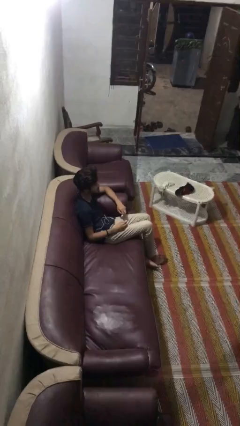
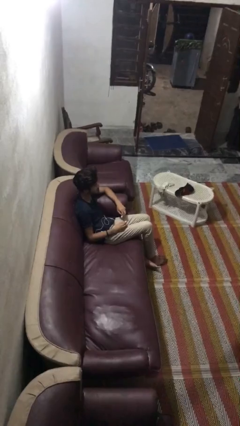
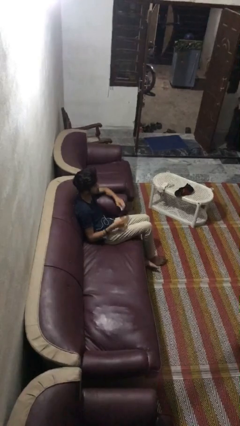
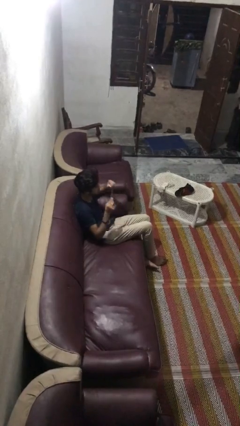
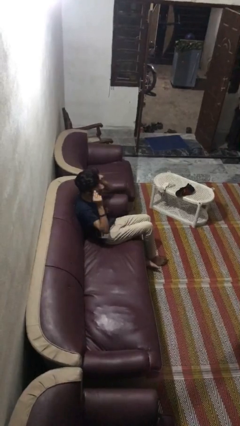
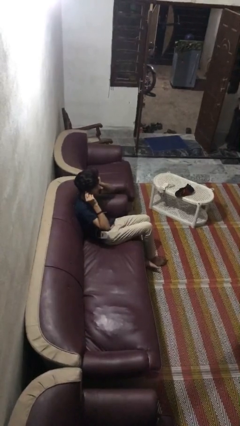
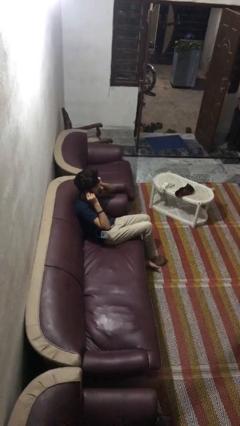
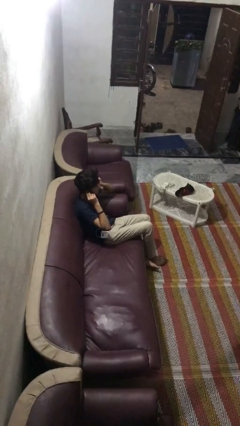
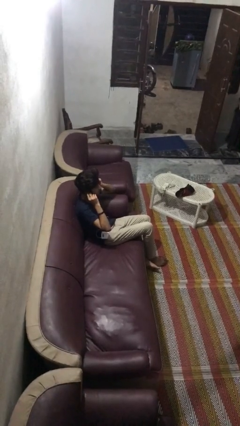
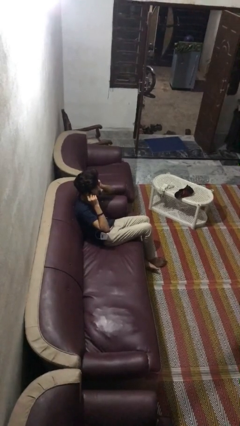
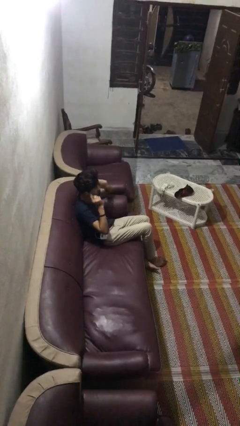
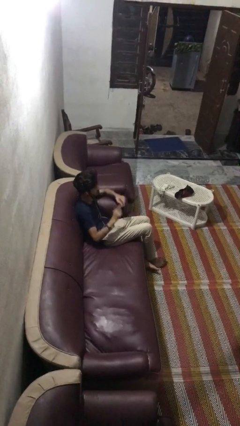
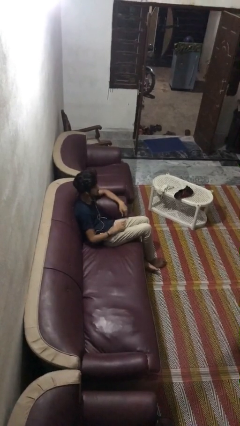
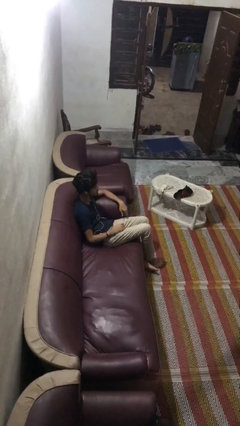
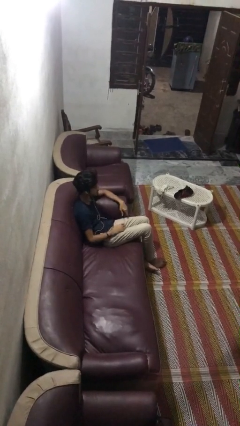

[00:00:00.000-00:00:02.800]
person puts on headphones

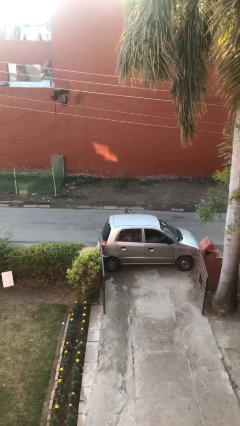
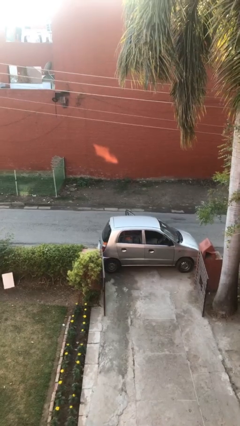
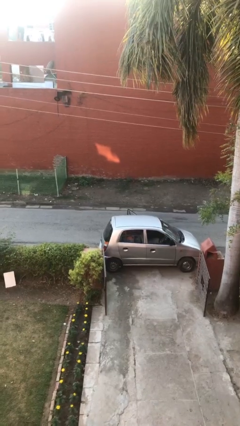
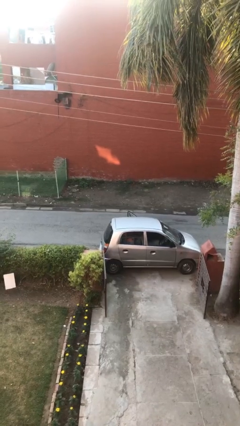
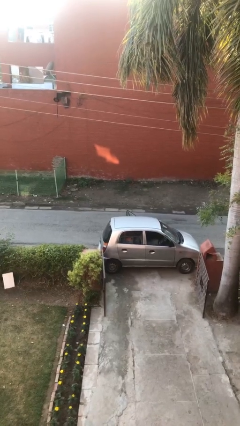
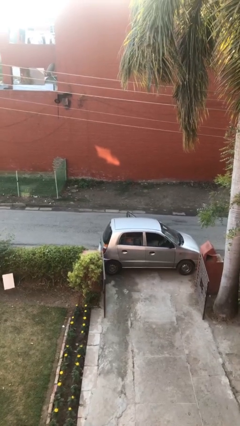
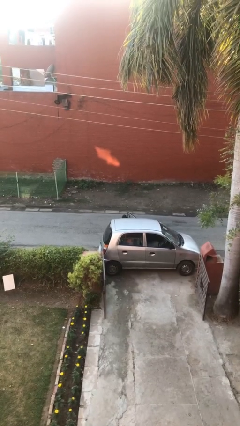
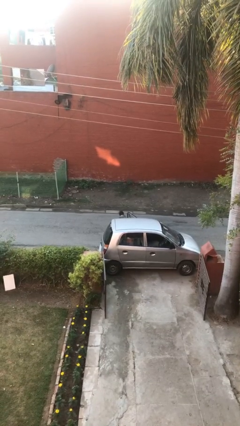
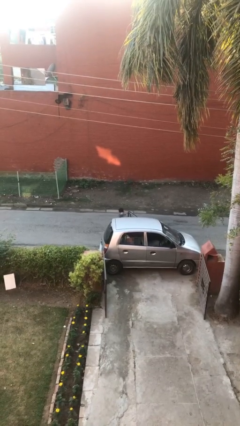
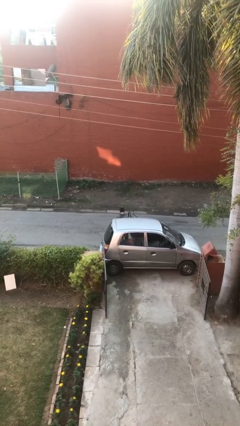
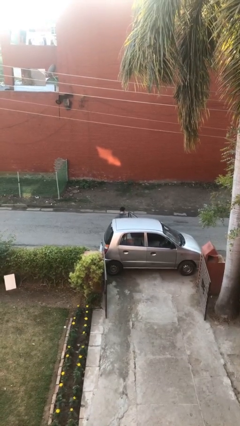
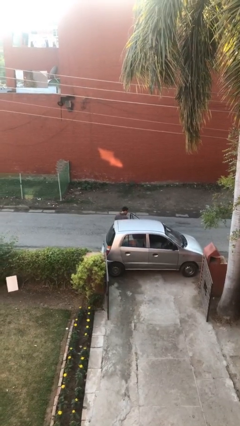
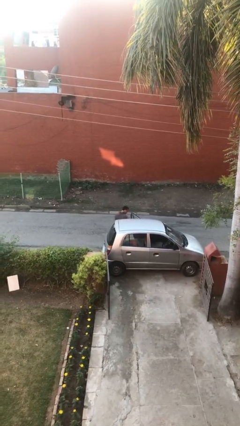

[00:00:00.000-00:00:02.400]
person exits car

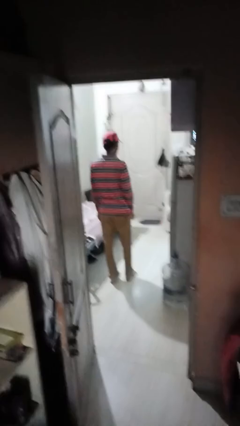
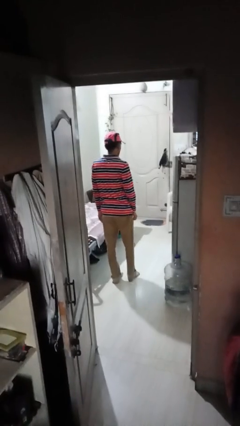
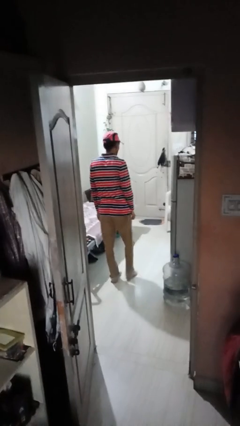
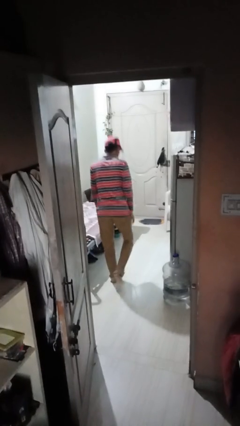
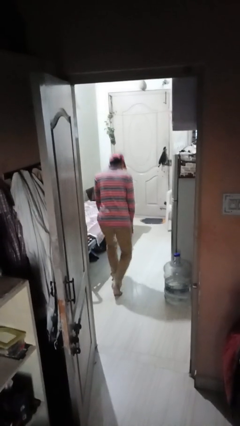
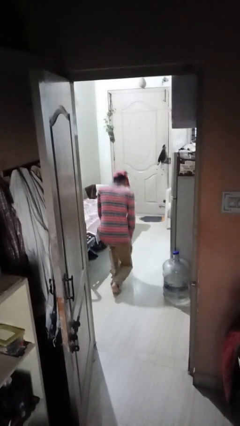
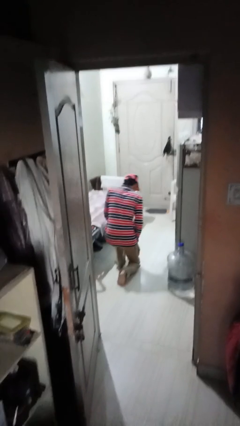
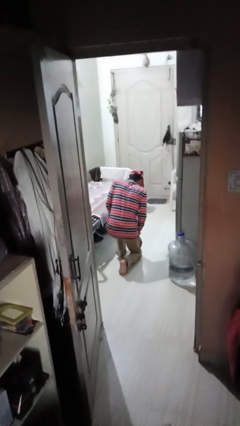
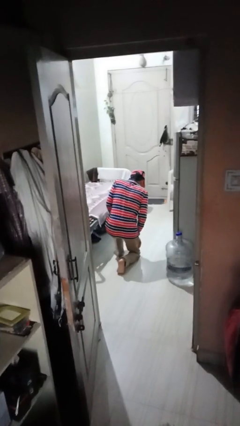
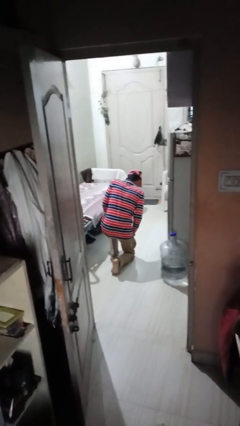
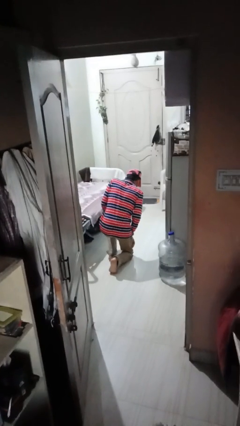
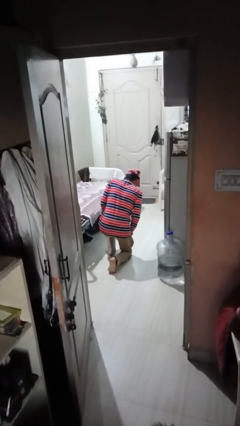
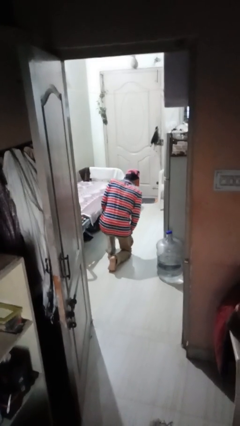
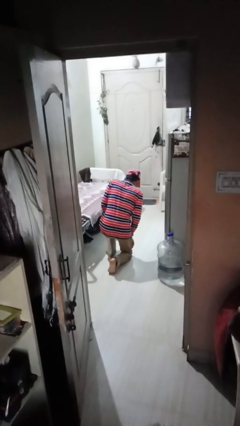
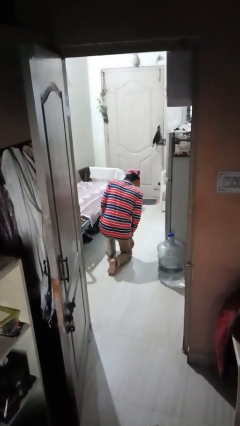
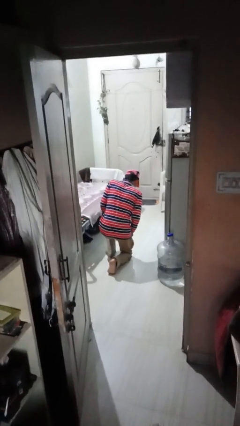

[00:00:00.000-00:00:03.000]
person kneels

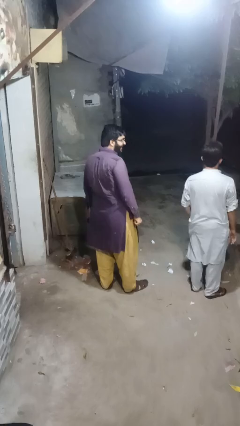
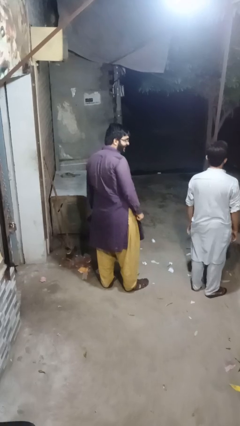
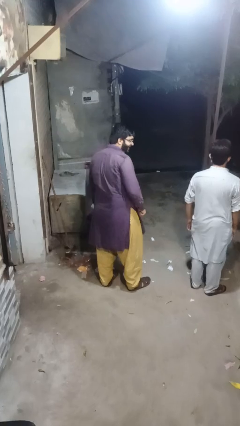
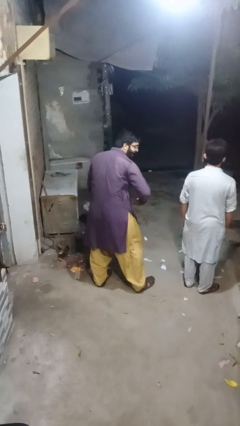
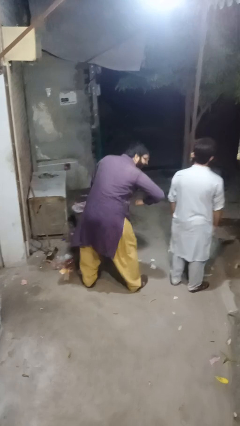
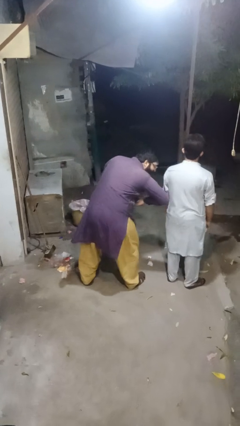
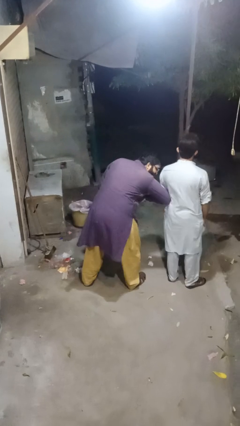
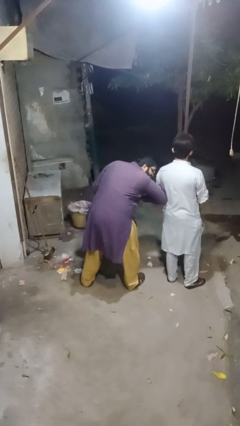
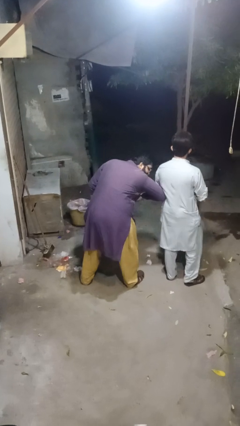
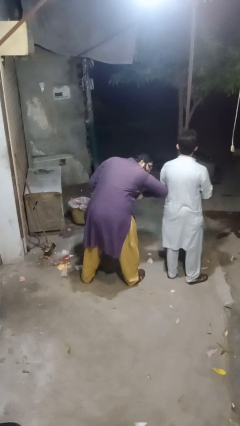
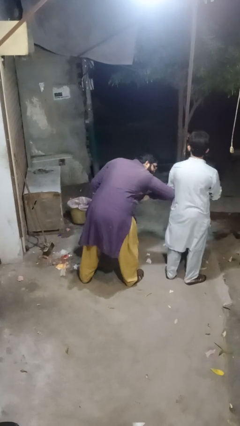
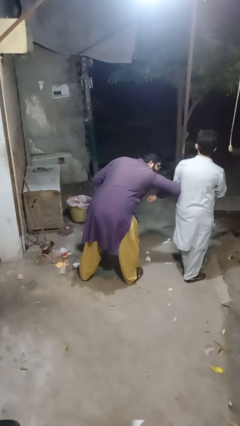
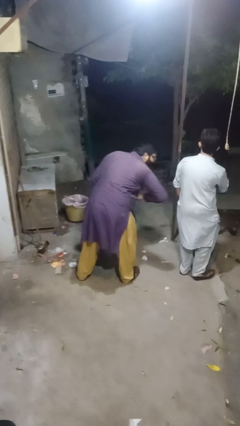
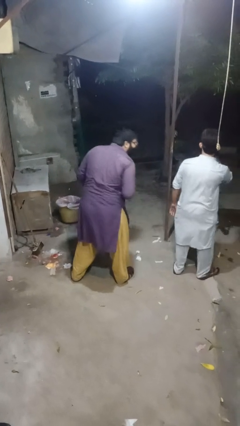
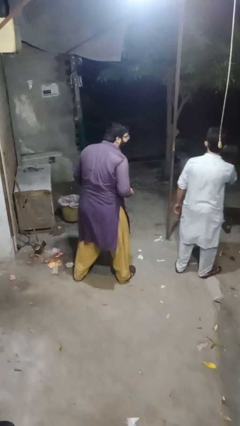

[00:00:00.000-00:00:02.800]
person nudges person with elbow

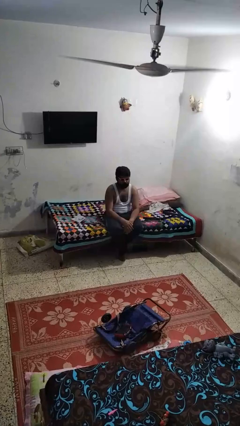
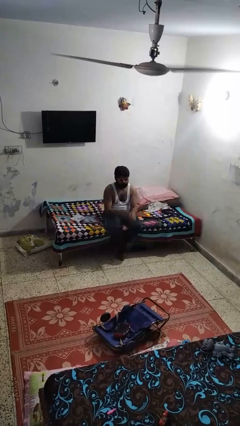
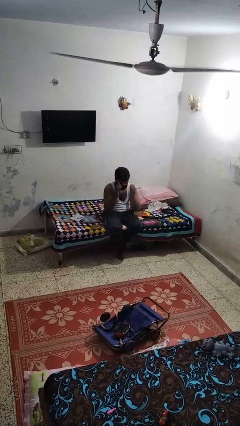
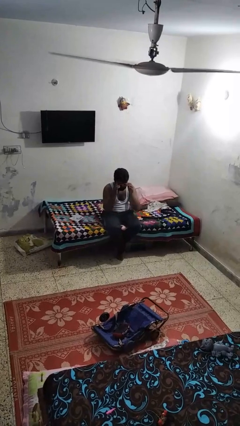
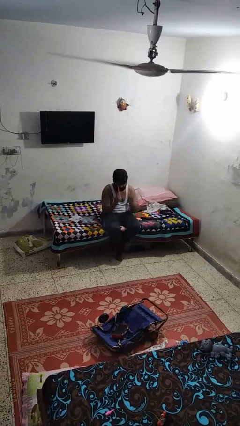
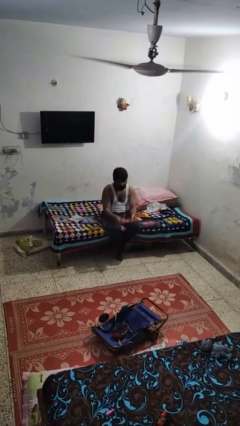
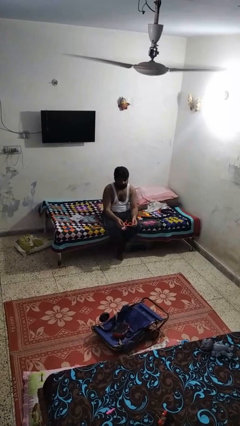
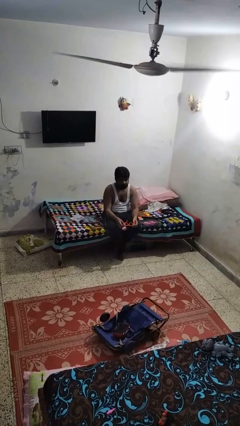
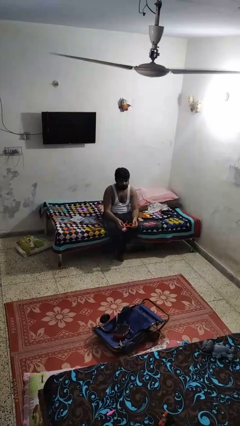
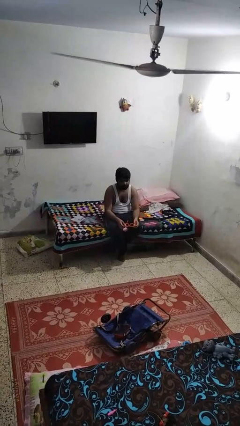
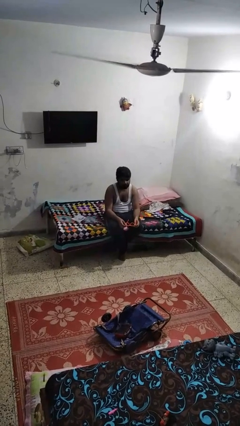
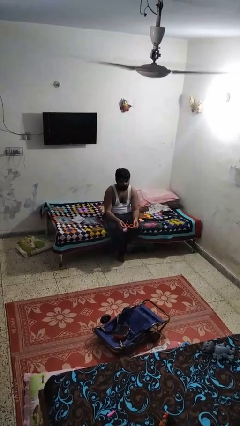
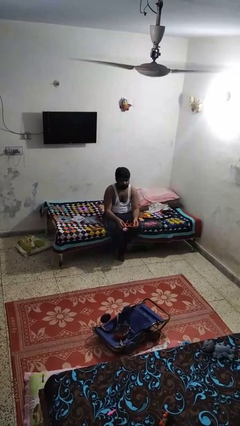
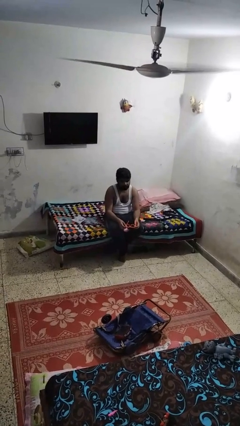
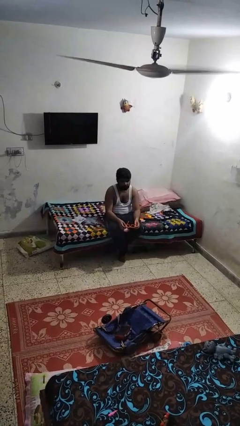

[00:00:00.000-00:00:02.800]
person takes off sunglasses

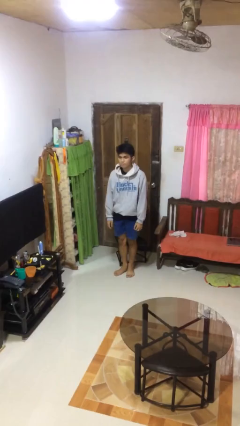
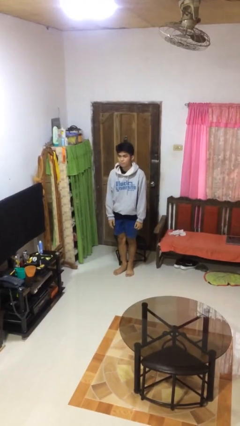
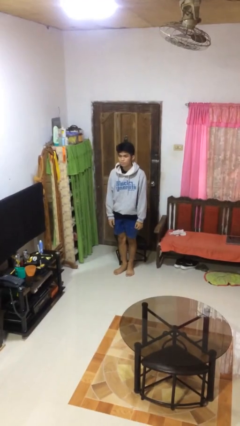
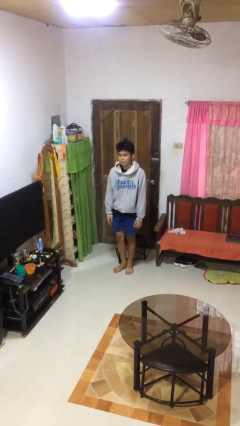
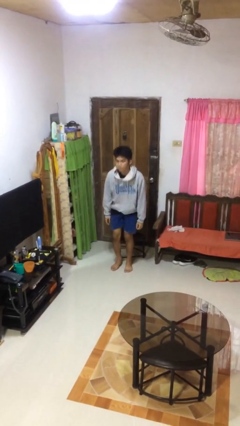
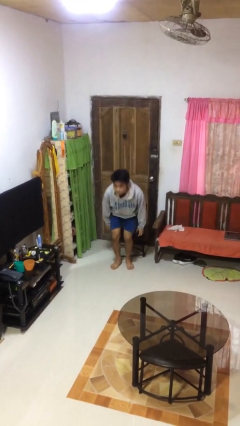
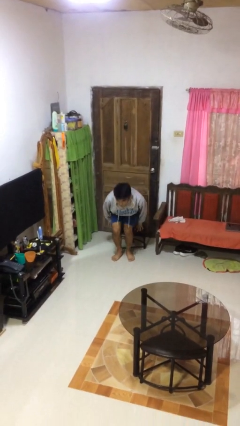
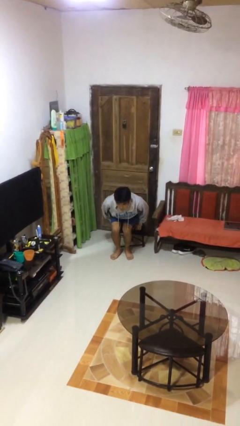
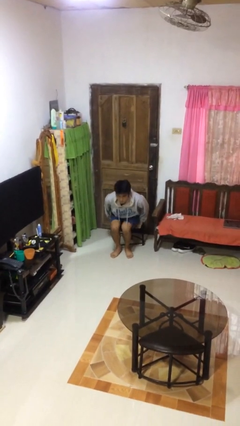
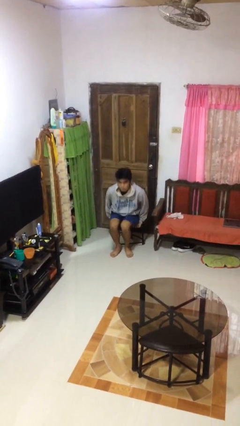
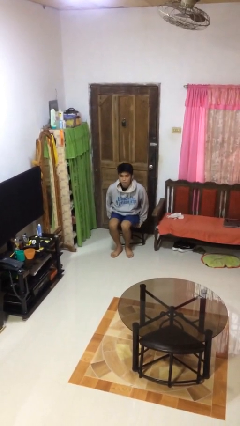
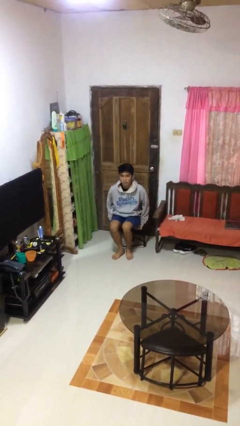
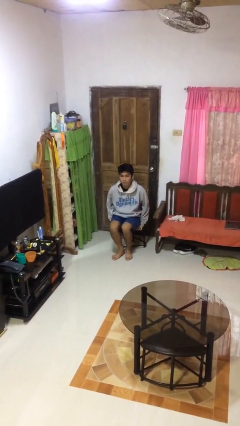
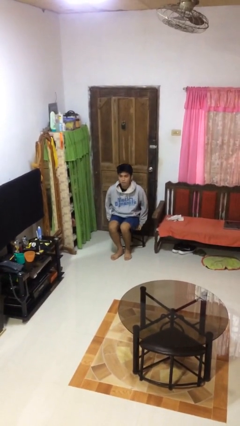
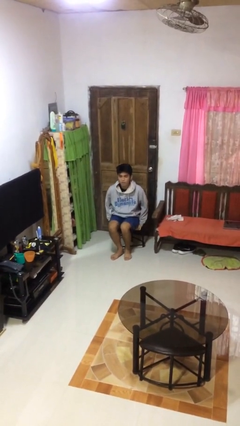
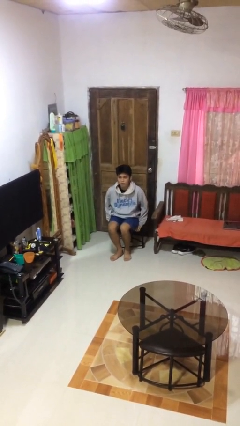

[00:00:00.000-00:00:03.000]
person sits down

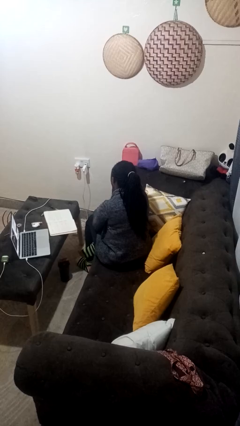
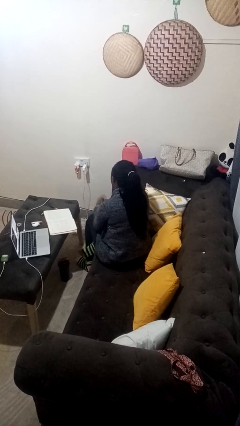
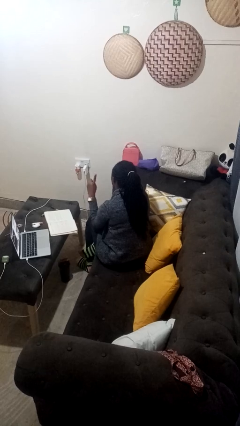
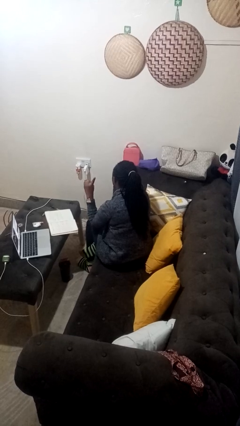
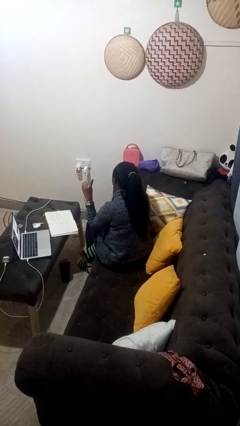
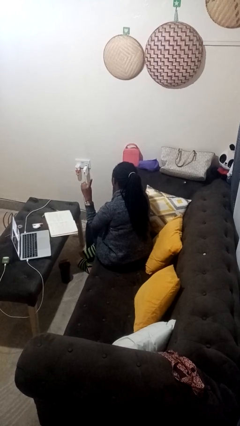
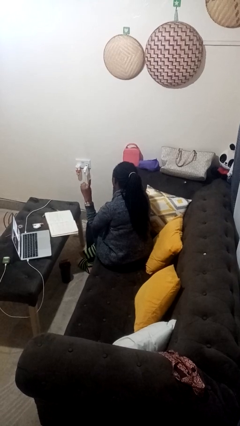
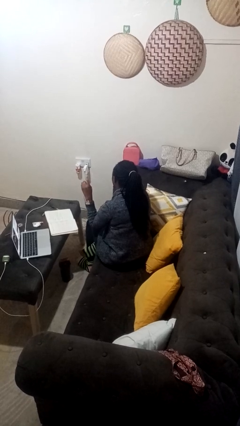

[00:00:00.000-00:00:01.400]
person gestures number one
